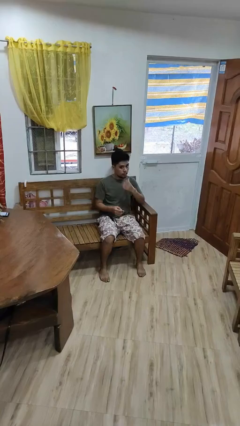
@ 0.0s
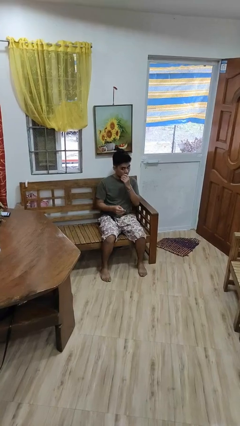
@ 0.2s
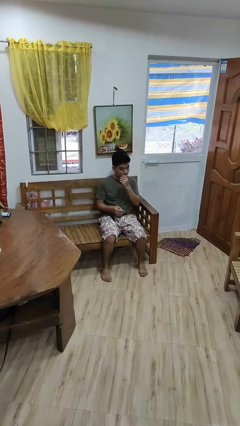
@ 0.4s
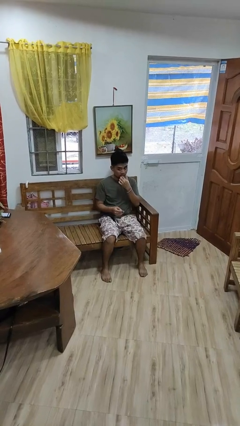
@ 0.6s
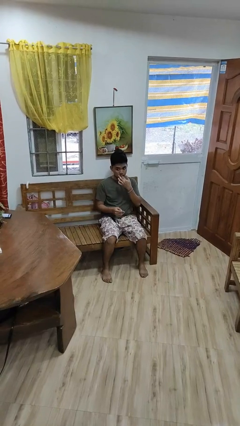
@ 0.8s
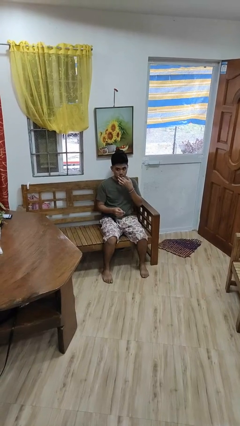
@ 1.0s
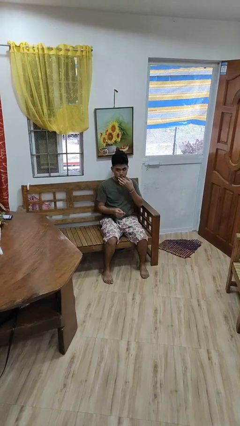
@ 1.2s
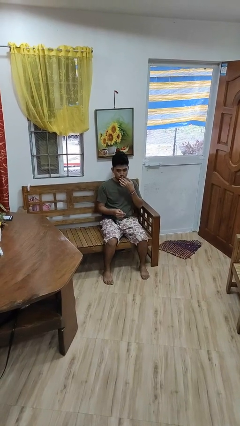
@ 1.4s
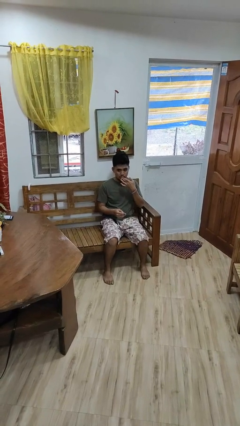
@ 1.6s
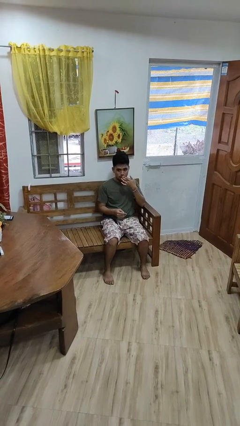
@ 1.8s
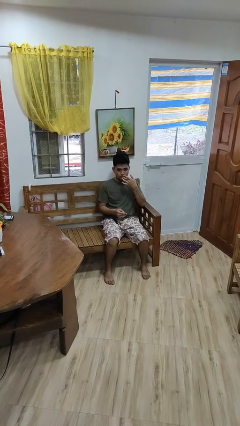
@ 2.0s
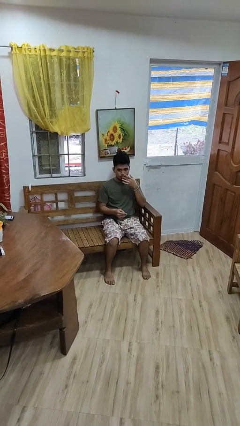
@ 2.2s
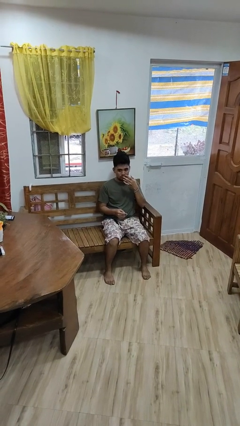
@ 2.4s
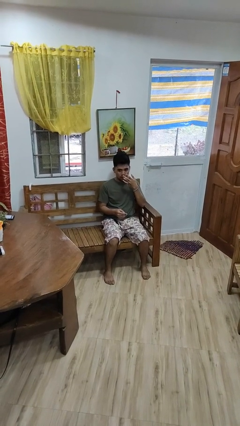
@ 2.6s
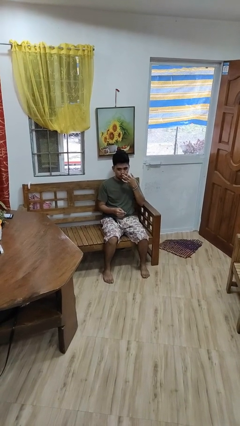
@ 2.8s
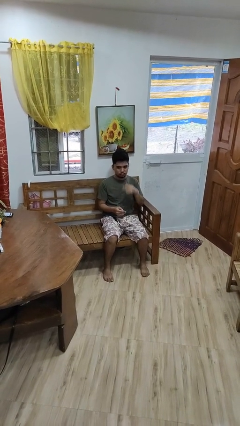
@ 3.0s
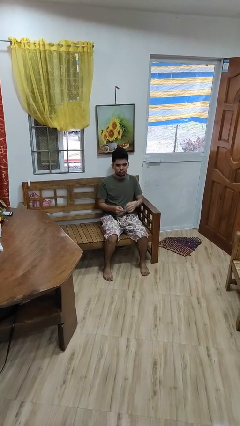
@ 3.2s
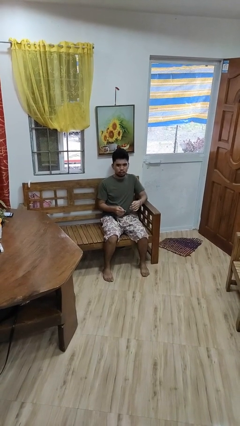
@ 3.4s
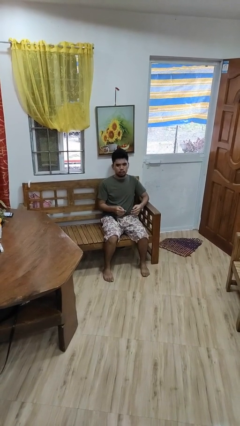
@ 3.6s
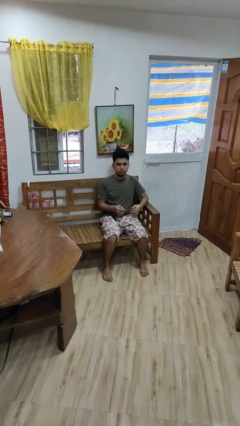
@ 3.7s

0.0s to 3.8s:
person licks fingers

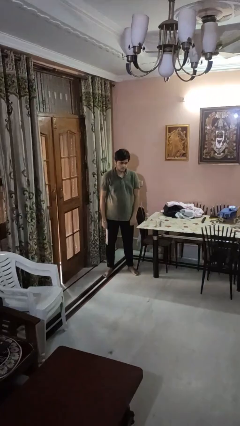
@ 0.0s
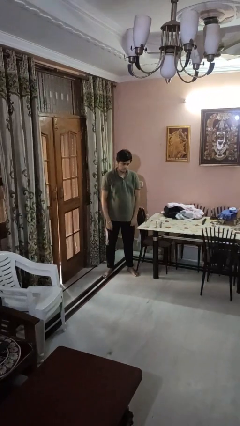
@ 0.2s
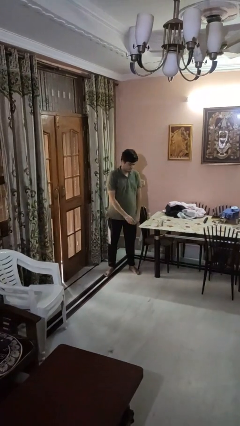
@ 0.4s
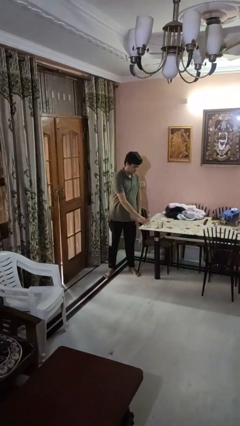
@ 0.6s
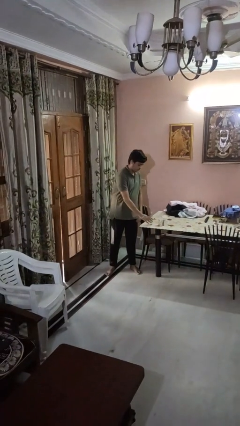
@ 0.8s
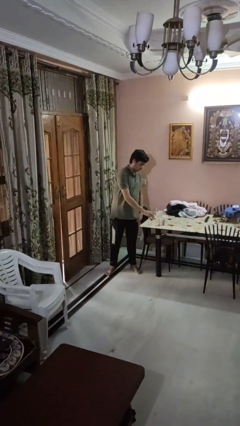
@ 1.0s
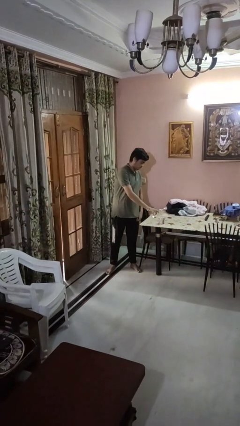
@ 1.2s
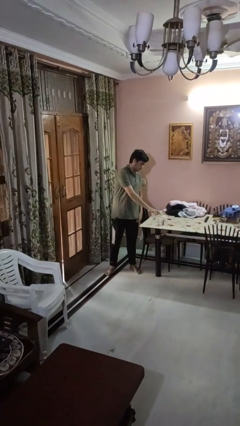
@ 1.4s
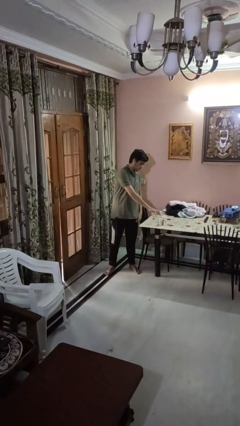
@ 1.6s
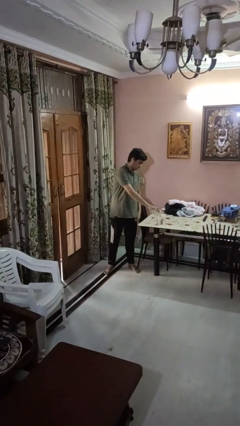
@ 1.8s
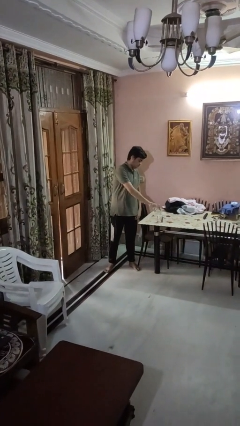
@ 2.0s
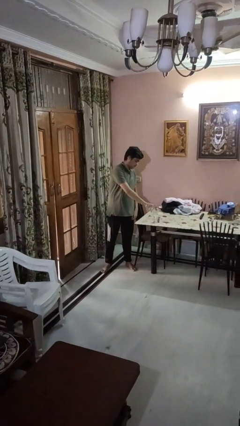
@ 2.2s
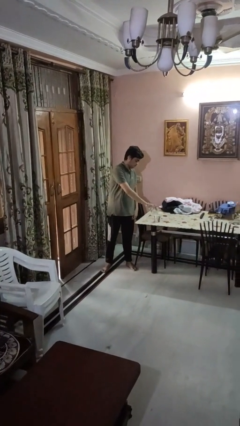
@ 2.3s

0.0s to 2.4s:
person pours liquid into cup

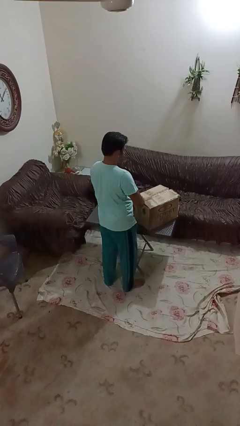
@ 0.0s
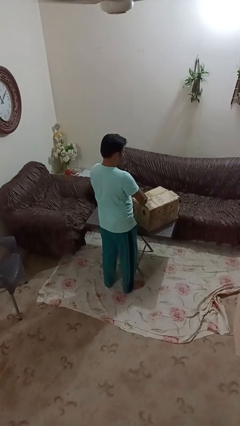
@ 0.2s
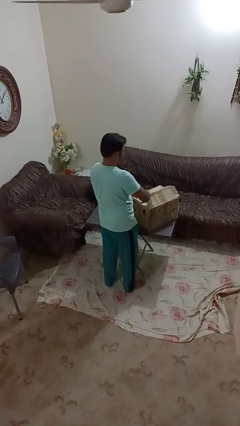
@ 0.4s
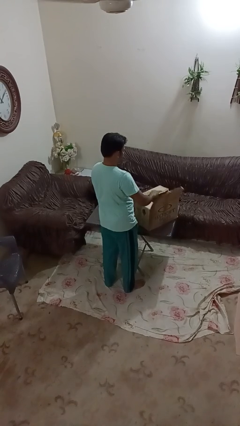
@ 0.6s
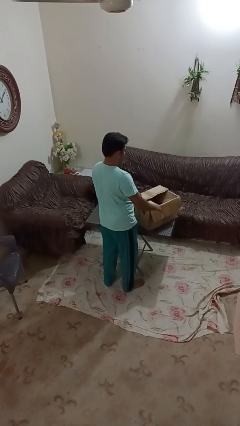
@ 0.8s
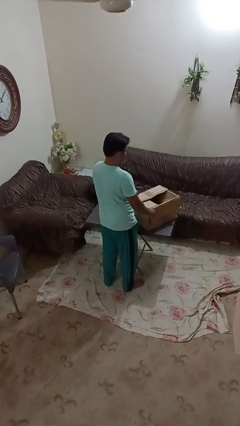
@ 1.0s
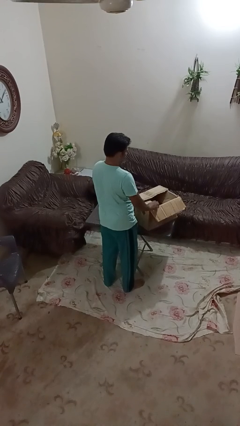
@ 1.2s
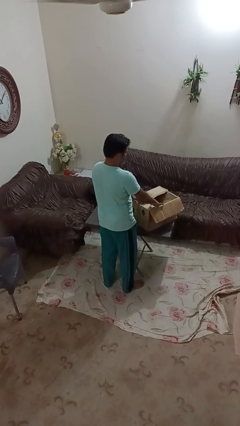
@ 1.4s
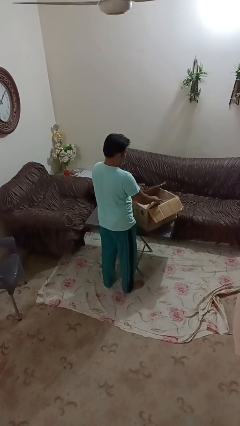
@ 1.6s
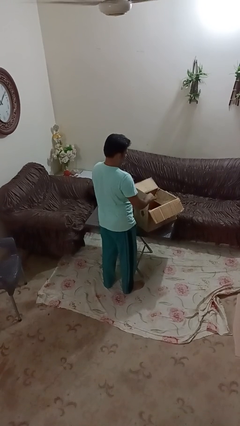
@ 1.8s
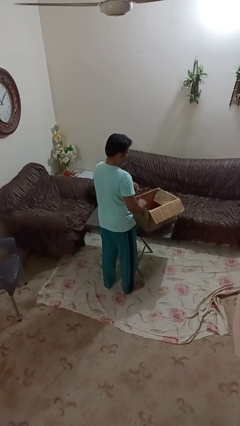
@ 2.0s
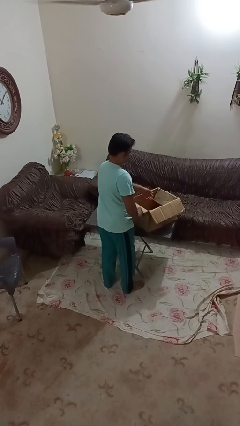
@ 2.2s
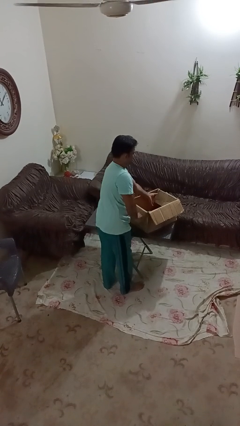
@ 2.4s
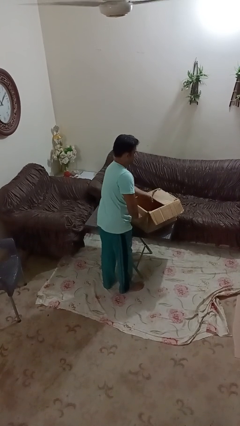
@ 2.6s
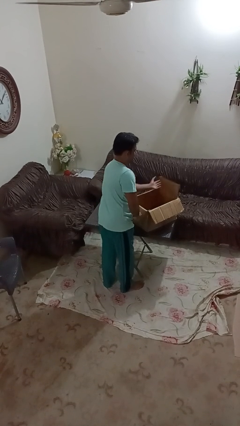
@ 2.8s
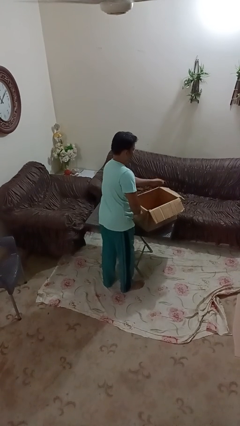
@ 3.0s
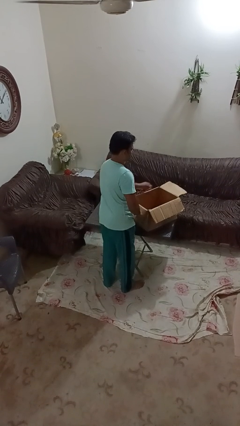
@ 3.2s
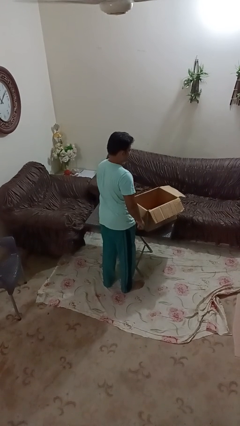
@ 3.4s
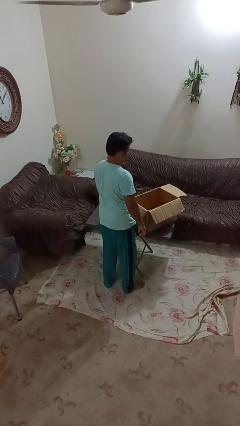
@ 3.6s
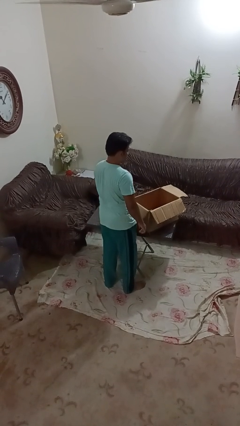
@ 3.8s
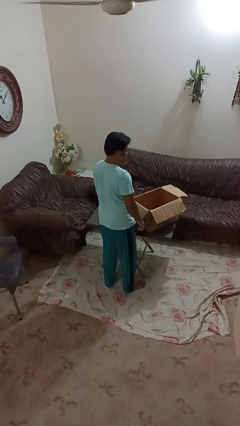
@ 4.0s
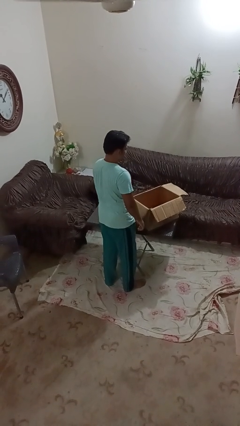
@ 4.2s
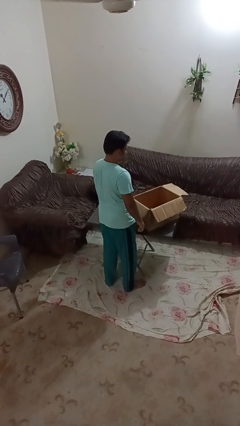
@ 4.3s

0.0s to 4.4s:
person opens box

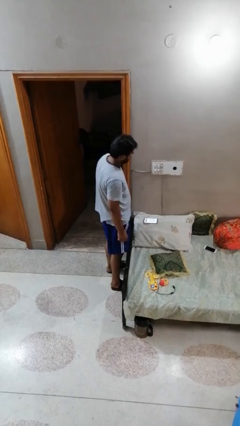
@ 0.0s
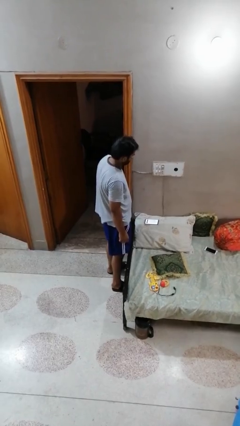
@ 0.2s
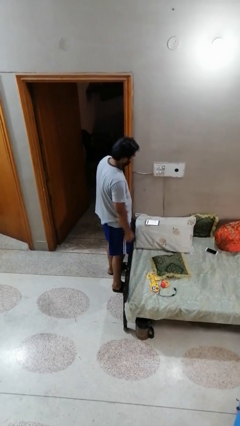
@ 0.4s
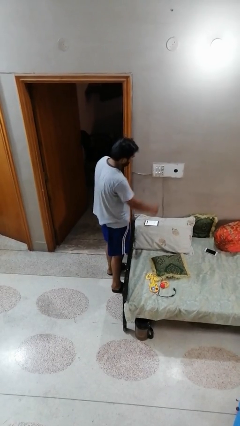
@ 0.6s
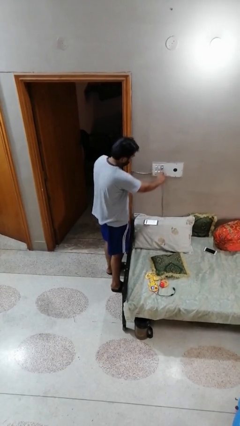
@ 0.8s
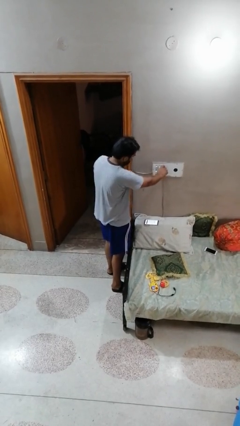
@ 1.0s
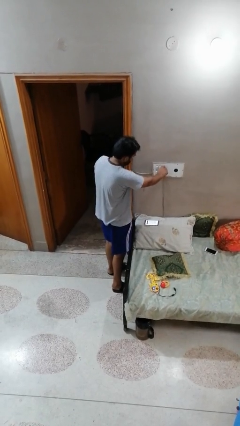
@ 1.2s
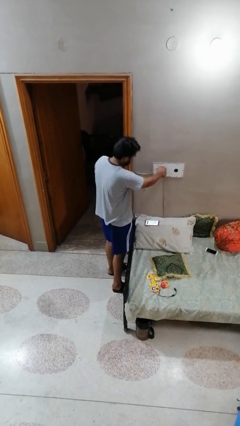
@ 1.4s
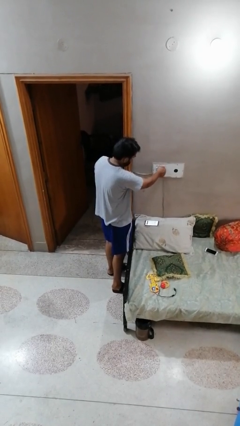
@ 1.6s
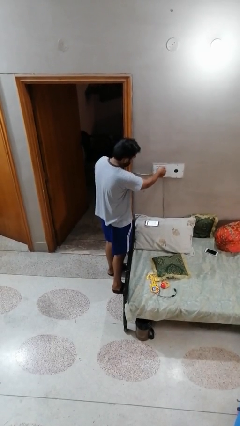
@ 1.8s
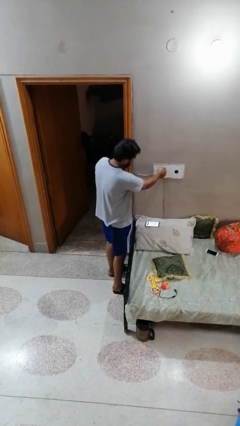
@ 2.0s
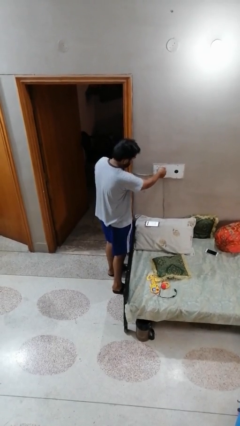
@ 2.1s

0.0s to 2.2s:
person adjusts thermostat

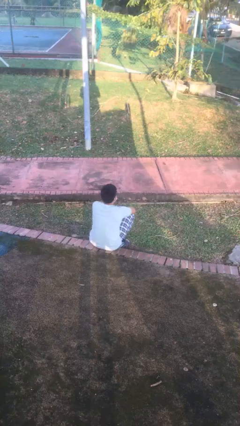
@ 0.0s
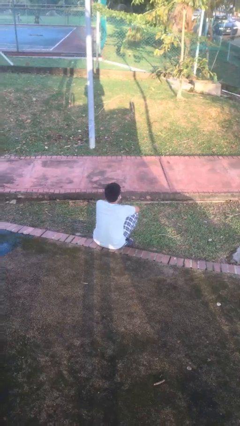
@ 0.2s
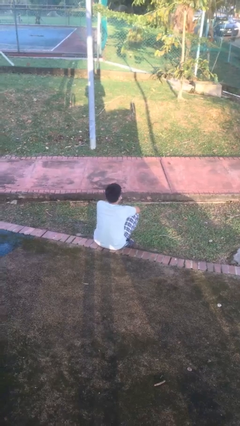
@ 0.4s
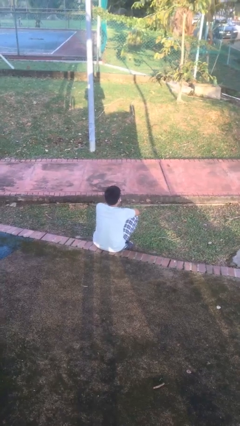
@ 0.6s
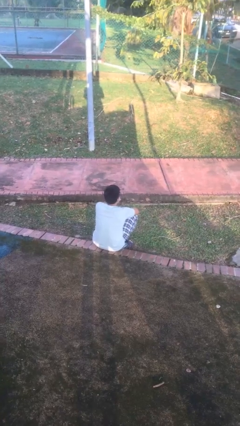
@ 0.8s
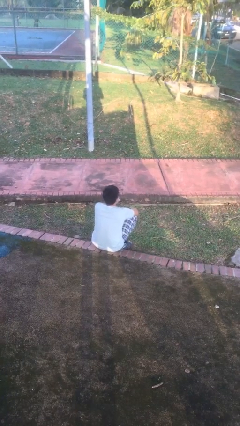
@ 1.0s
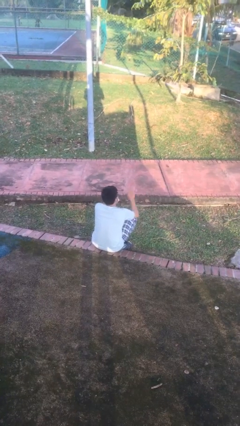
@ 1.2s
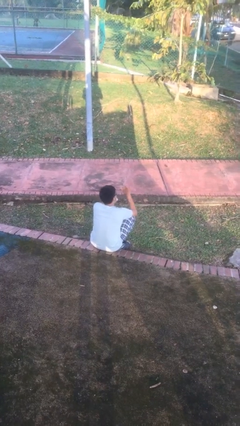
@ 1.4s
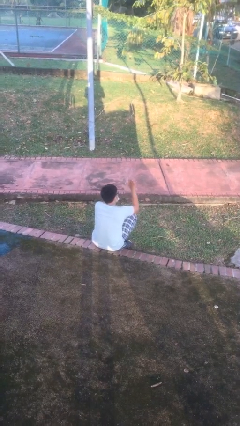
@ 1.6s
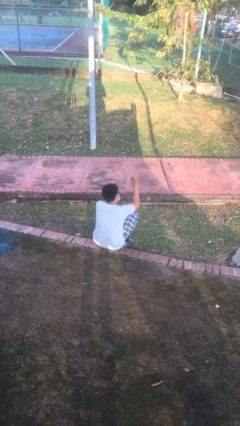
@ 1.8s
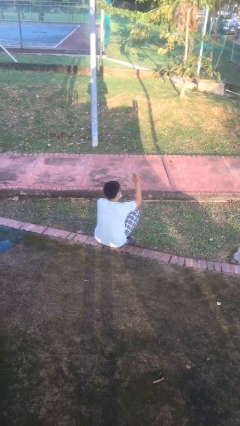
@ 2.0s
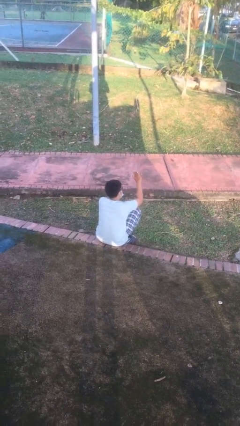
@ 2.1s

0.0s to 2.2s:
person gestures stop

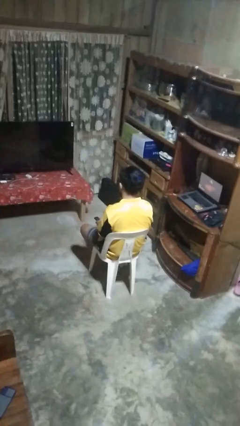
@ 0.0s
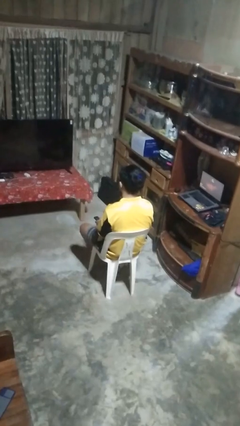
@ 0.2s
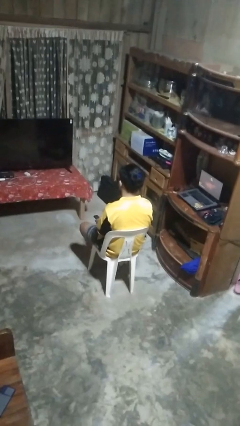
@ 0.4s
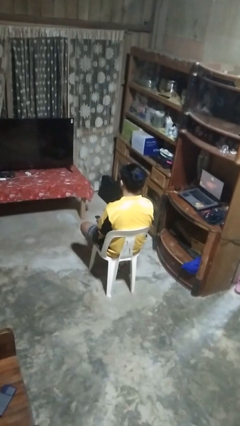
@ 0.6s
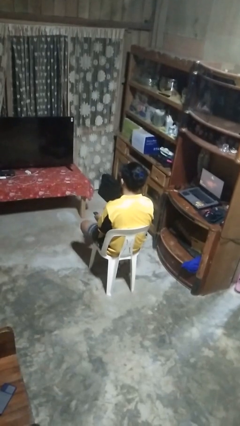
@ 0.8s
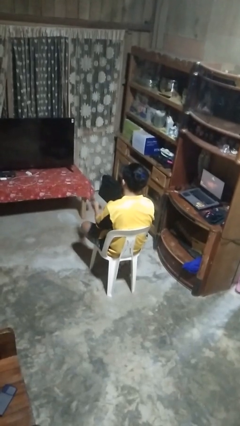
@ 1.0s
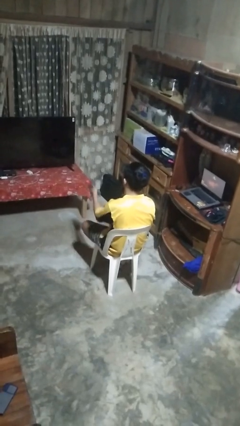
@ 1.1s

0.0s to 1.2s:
person uses television remote

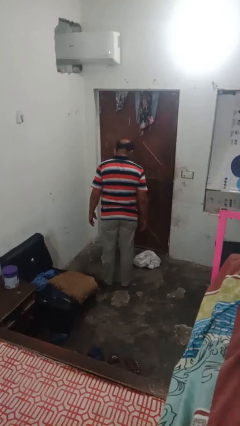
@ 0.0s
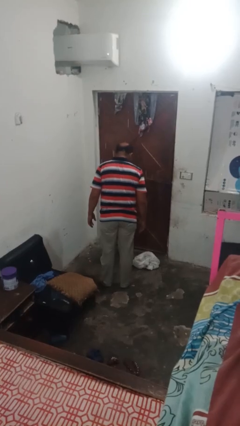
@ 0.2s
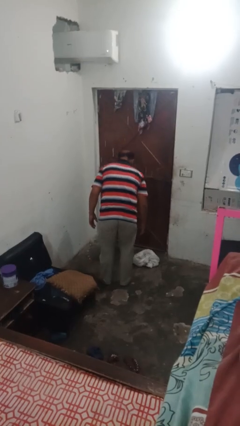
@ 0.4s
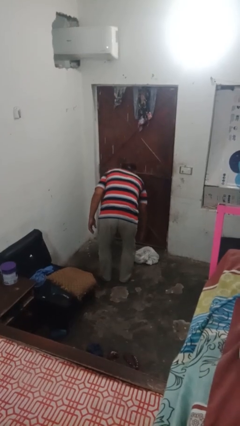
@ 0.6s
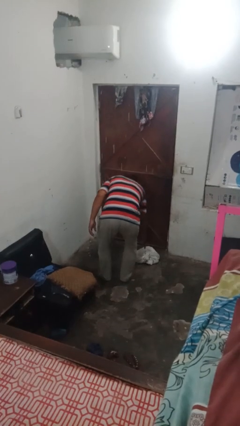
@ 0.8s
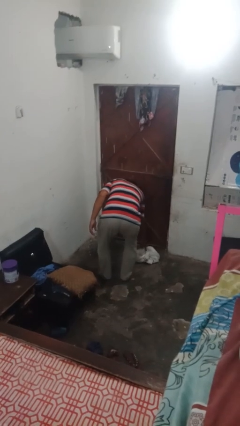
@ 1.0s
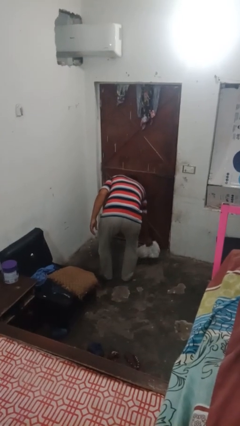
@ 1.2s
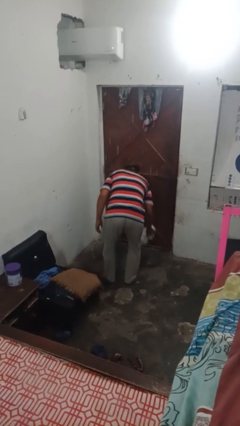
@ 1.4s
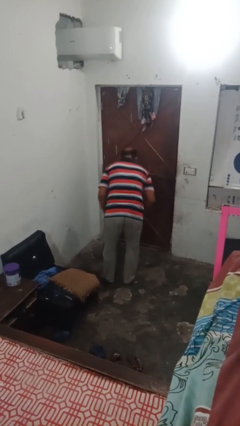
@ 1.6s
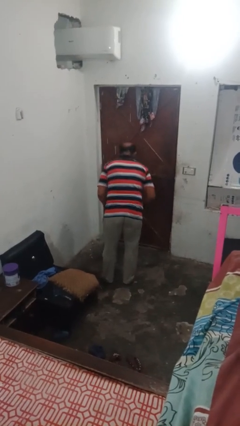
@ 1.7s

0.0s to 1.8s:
person picks up object from floor
